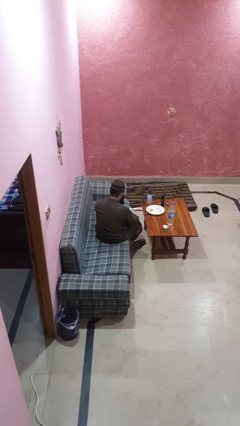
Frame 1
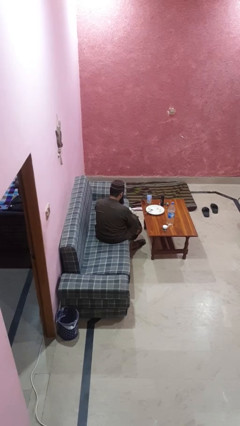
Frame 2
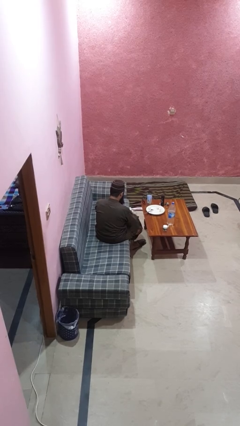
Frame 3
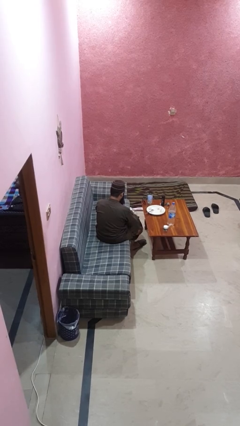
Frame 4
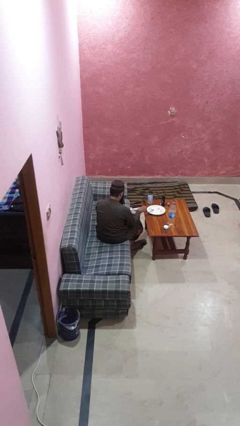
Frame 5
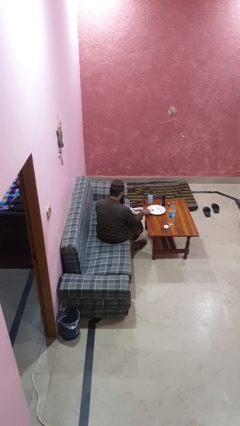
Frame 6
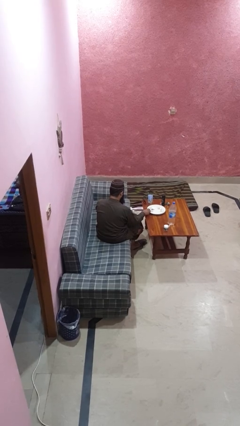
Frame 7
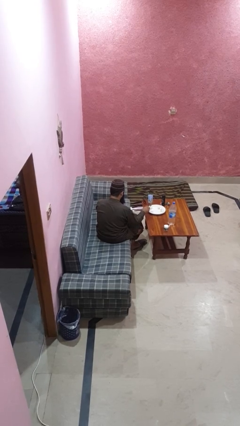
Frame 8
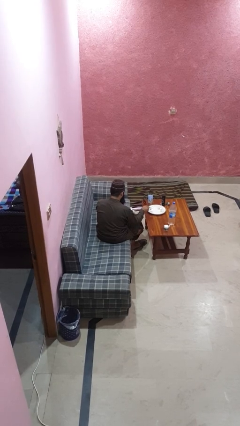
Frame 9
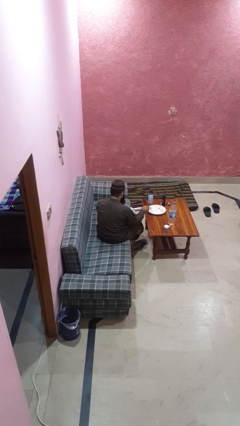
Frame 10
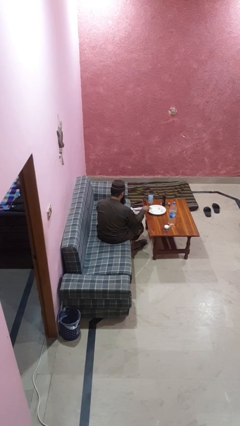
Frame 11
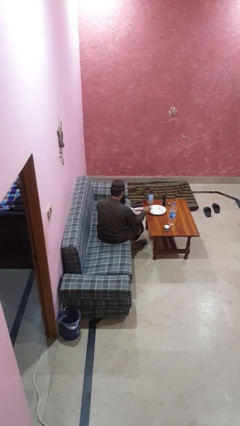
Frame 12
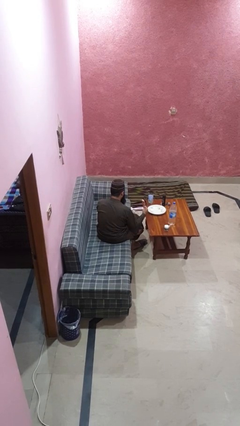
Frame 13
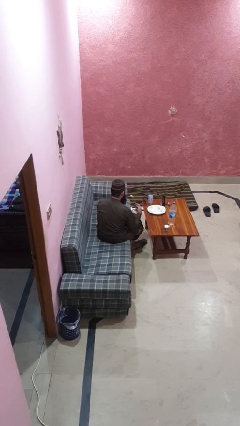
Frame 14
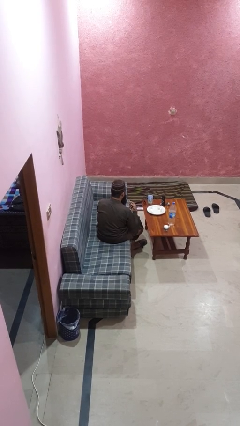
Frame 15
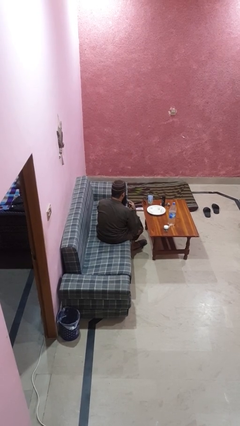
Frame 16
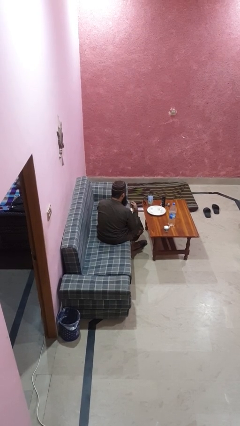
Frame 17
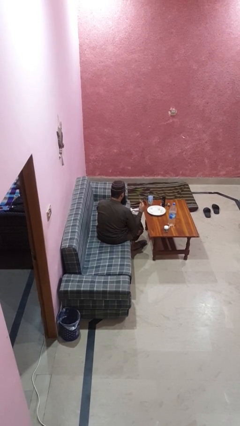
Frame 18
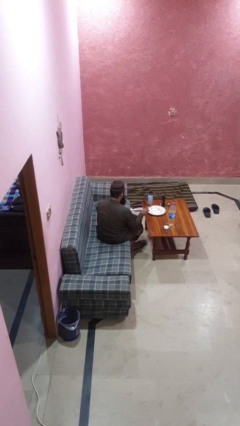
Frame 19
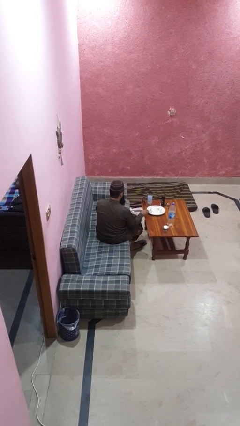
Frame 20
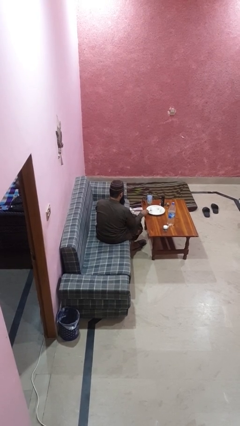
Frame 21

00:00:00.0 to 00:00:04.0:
person eats with utensil

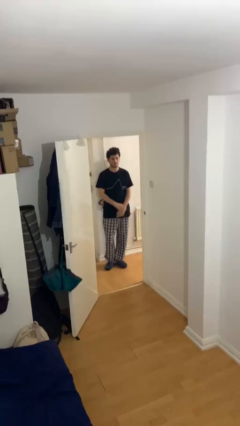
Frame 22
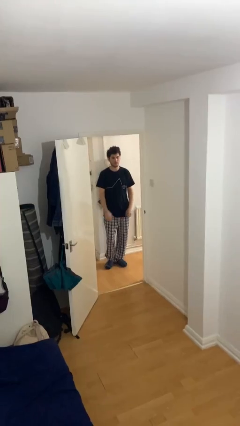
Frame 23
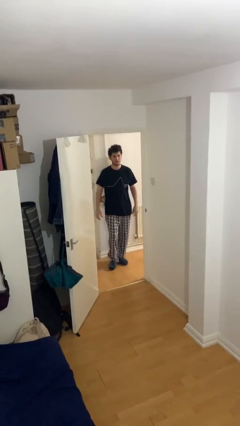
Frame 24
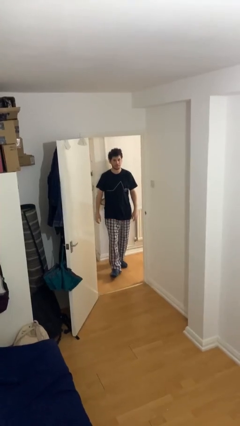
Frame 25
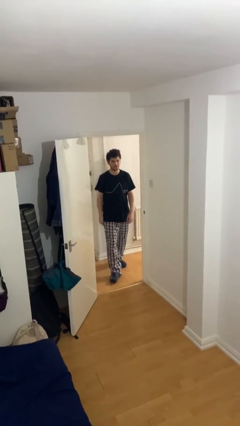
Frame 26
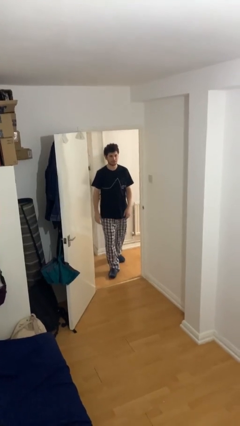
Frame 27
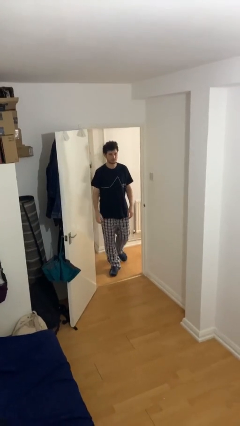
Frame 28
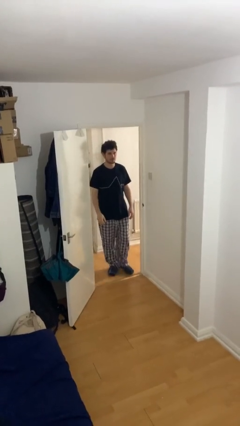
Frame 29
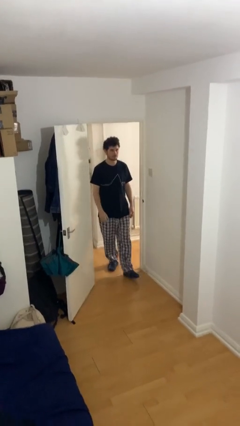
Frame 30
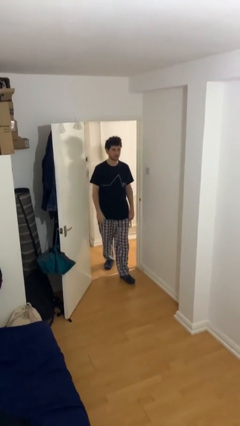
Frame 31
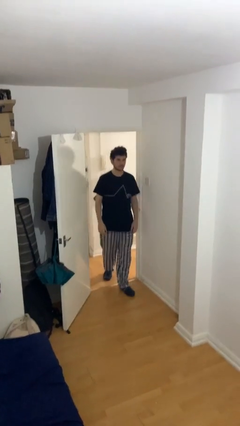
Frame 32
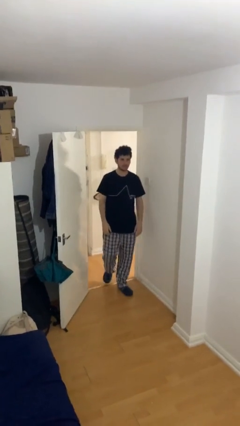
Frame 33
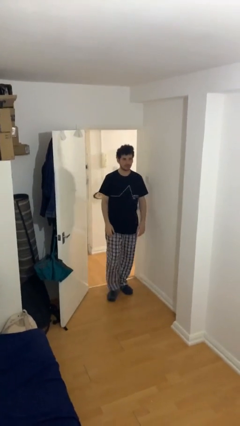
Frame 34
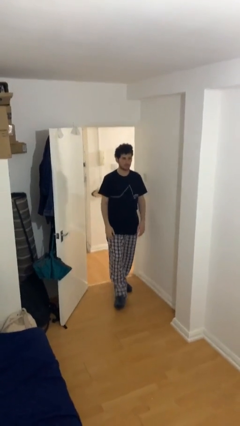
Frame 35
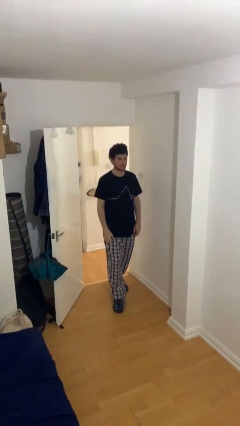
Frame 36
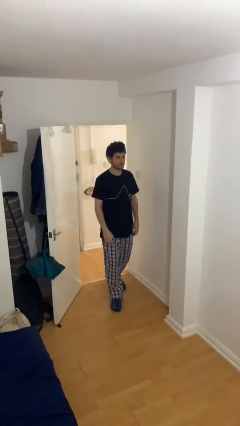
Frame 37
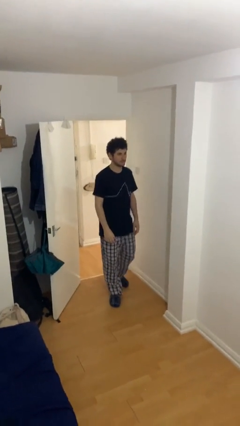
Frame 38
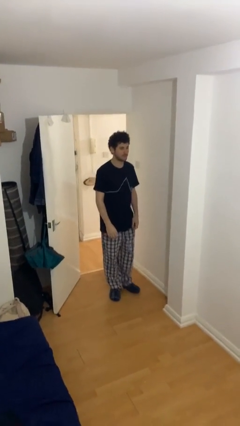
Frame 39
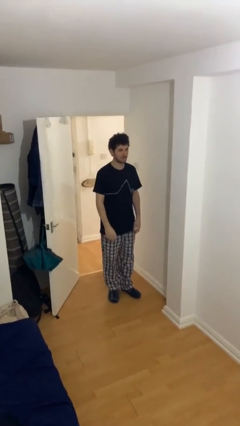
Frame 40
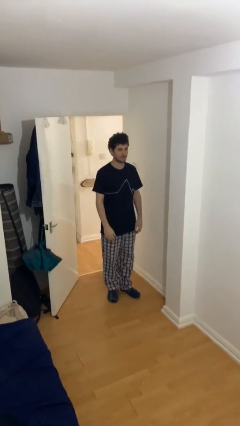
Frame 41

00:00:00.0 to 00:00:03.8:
person enters scene through structure

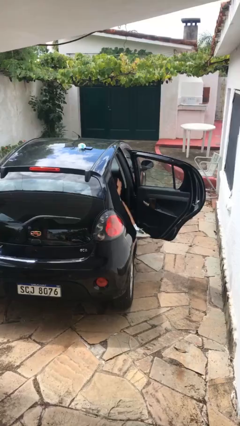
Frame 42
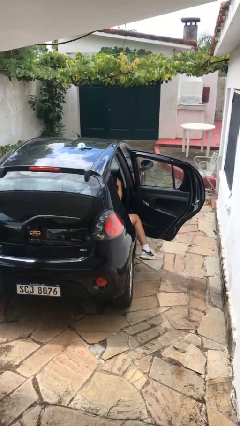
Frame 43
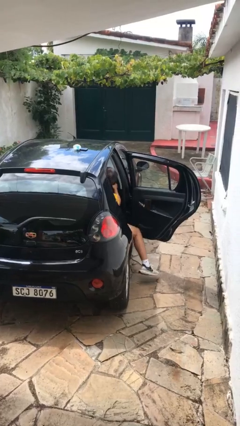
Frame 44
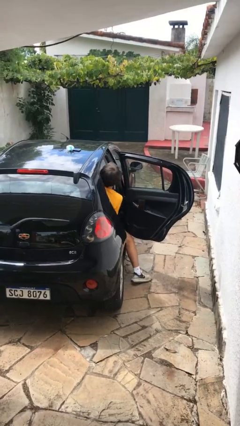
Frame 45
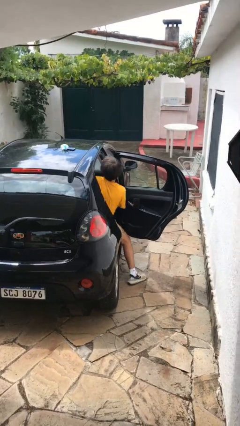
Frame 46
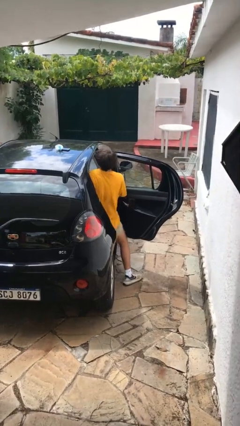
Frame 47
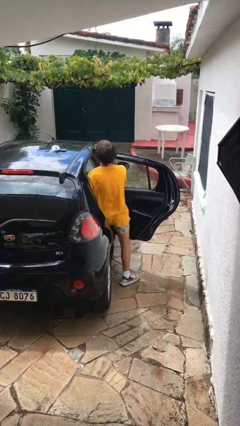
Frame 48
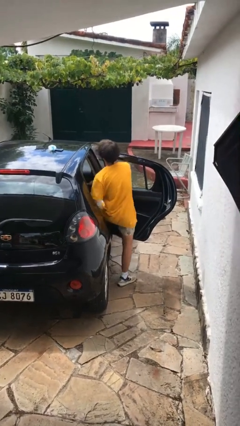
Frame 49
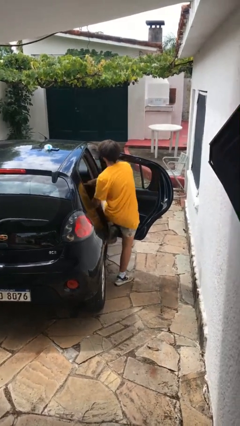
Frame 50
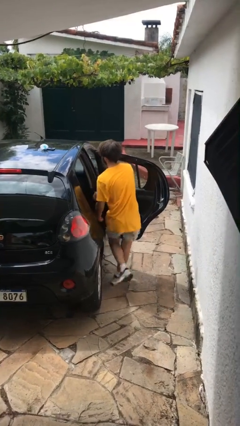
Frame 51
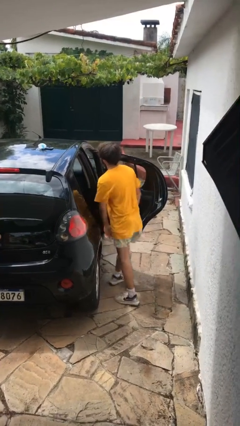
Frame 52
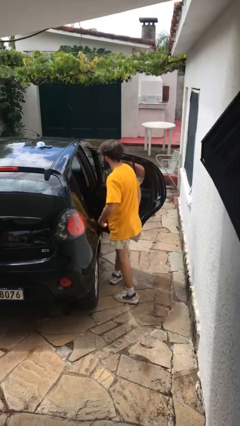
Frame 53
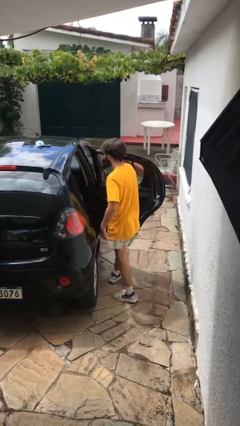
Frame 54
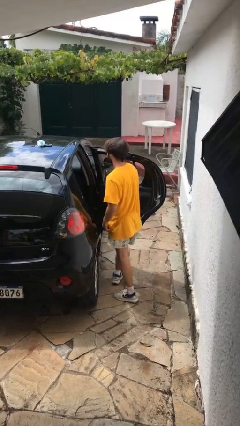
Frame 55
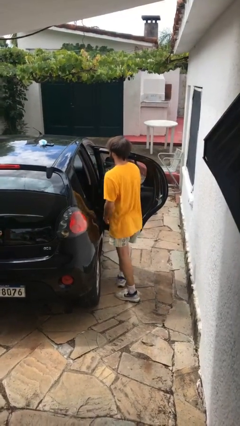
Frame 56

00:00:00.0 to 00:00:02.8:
person exits car

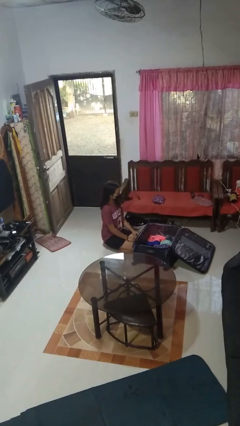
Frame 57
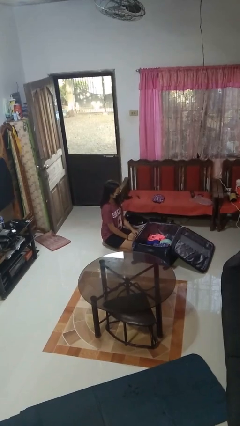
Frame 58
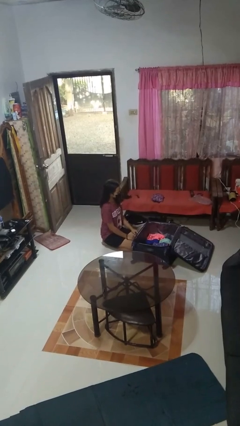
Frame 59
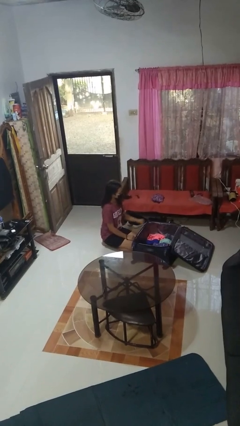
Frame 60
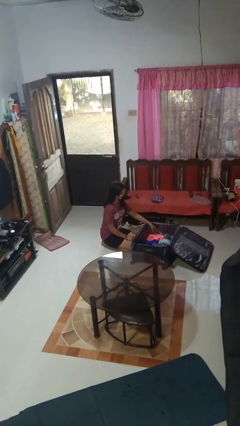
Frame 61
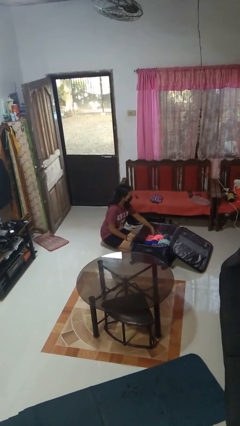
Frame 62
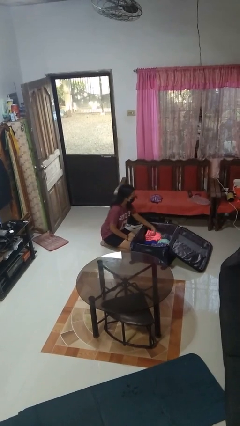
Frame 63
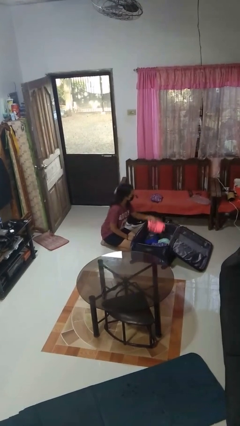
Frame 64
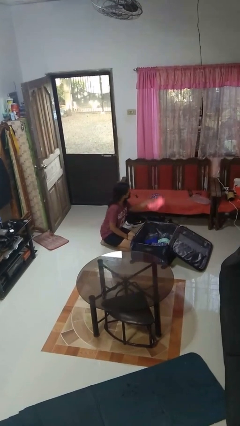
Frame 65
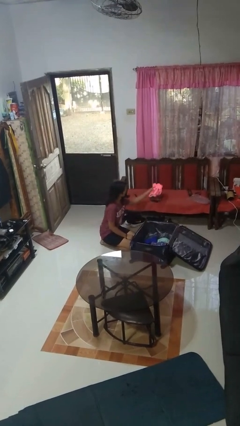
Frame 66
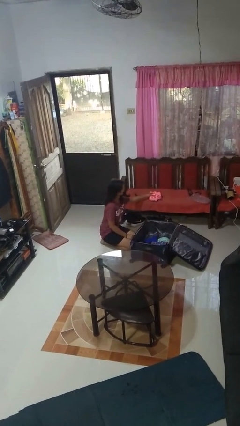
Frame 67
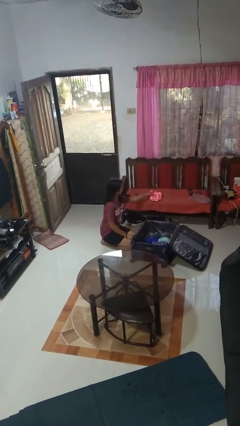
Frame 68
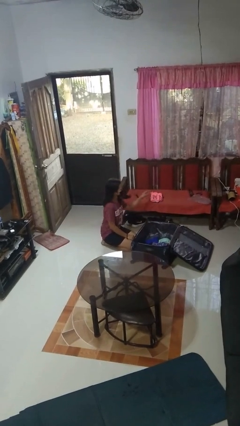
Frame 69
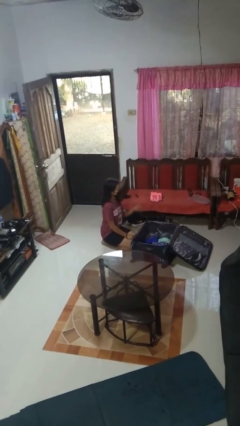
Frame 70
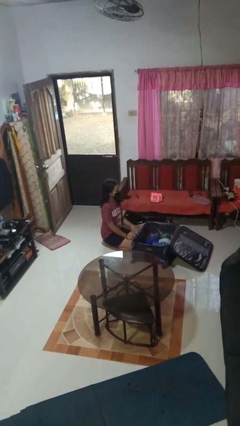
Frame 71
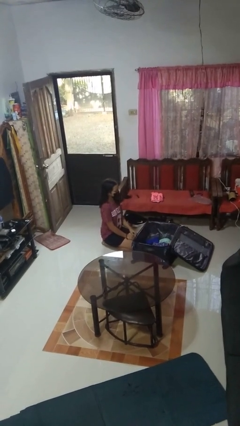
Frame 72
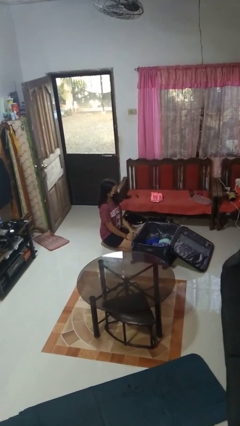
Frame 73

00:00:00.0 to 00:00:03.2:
person unloads clothes from suitcase

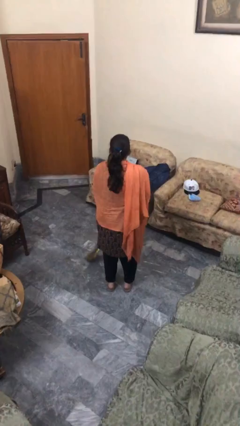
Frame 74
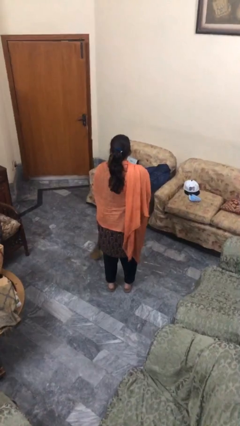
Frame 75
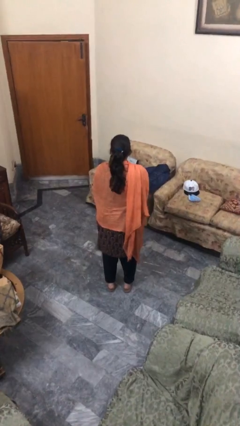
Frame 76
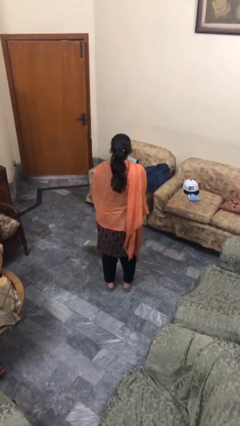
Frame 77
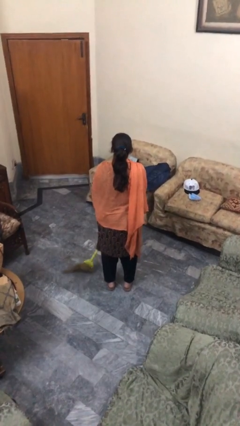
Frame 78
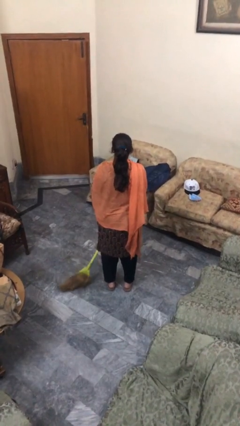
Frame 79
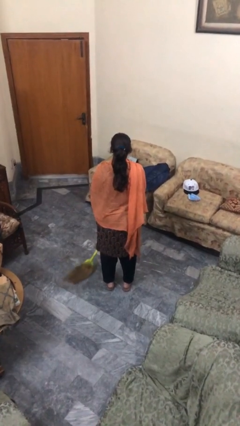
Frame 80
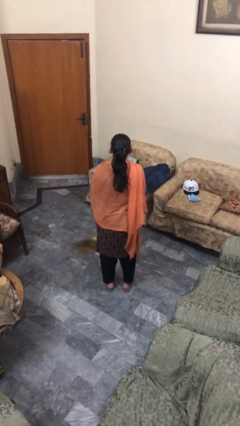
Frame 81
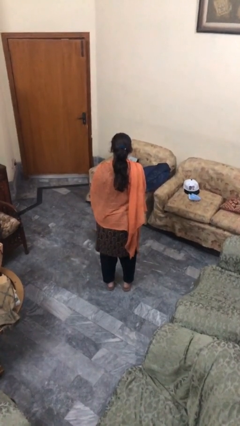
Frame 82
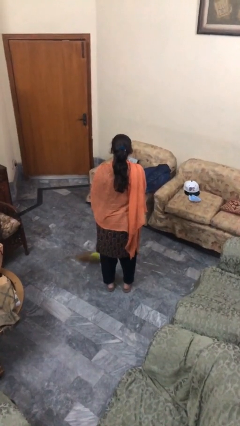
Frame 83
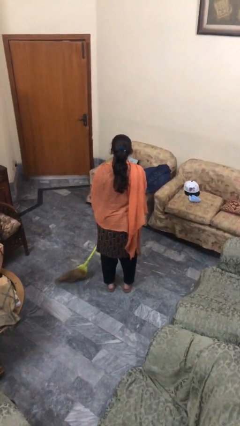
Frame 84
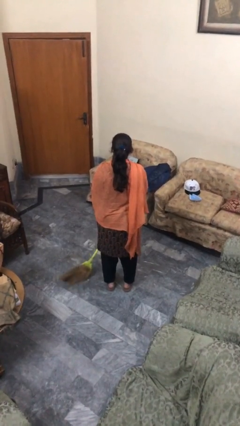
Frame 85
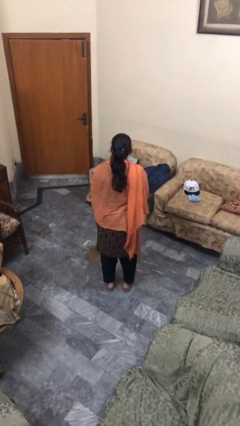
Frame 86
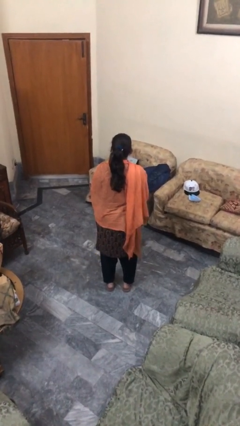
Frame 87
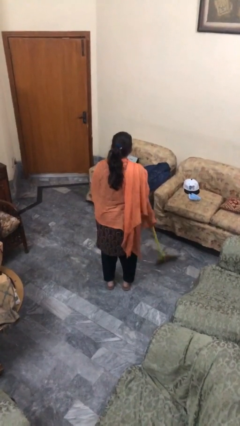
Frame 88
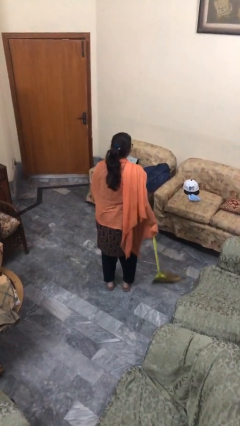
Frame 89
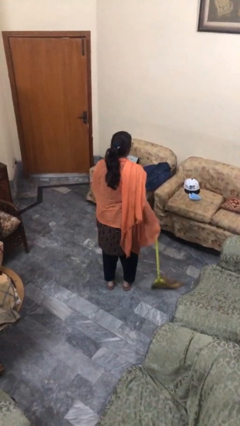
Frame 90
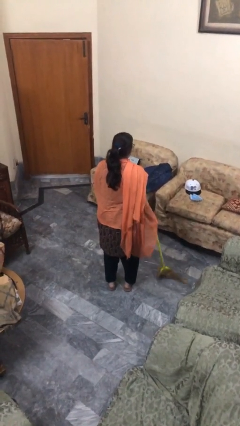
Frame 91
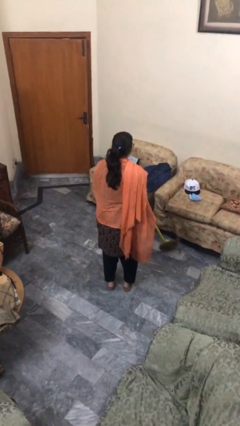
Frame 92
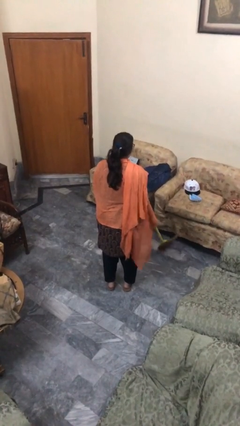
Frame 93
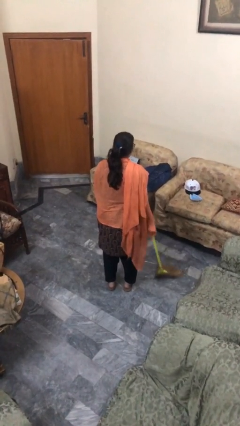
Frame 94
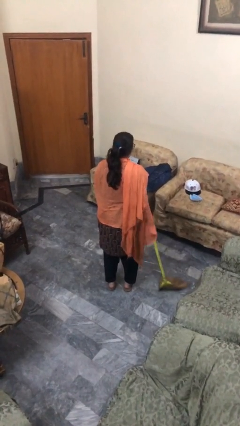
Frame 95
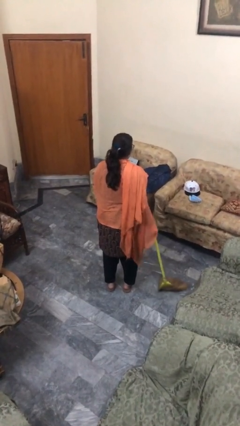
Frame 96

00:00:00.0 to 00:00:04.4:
person sweeps floor
